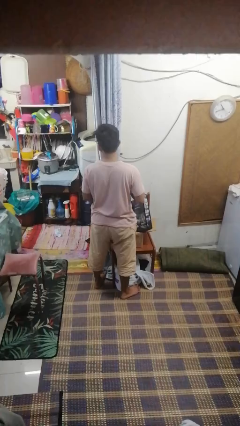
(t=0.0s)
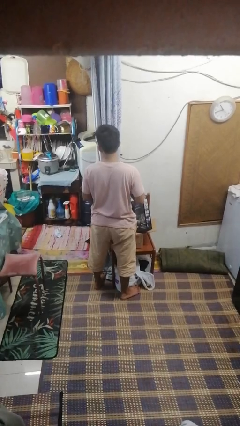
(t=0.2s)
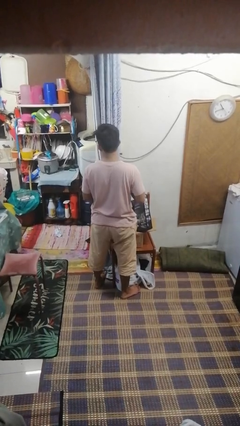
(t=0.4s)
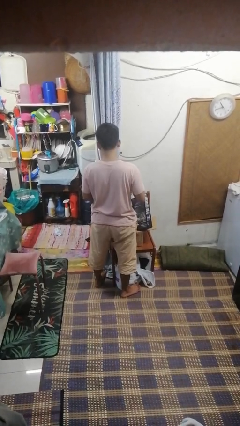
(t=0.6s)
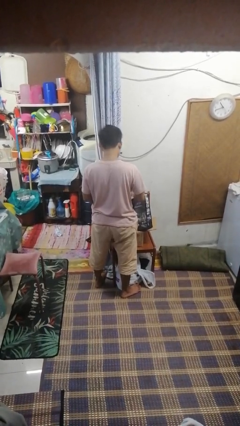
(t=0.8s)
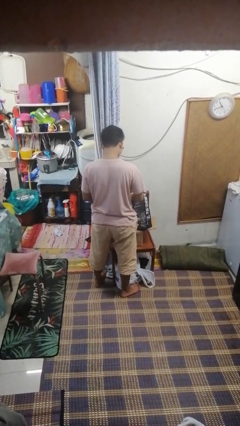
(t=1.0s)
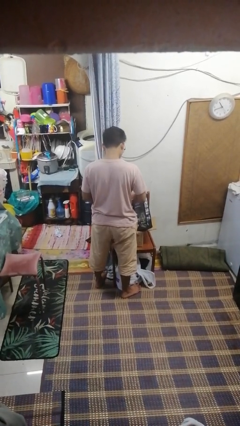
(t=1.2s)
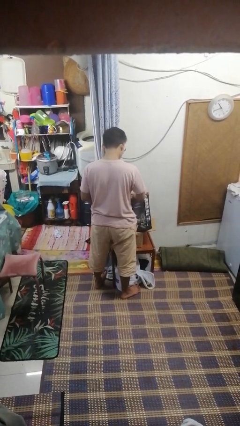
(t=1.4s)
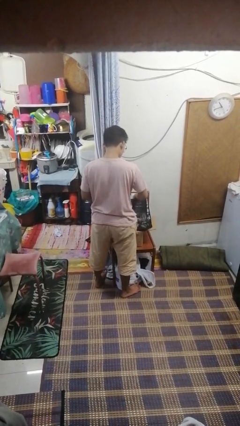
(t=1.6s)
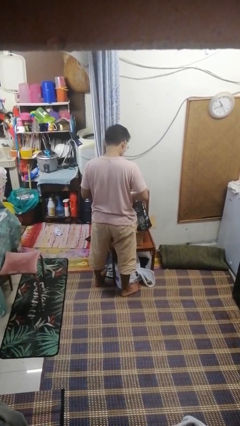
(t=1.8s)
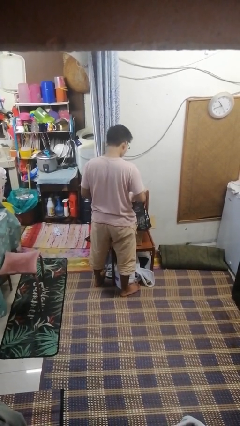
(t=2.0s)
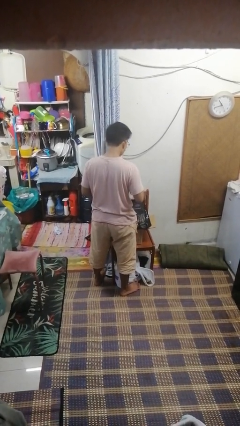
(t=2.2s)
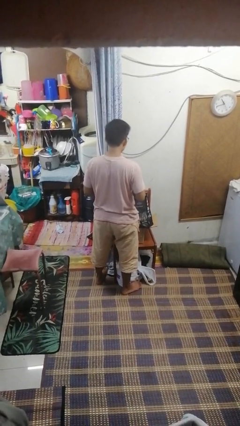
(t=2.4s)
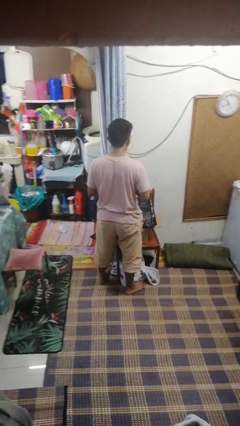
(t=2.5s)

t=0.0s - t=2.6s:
person searches in bag

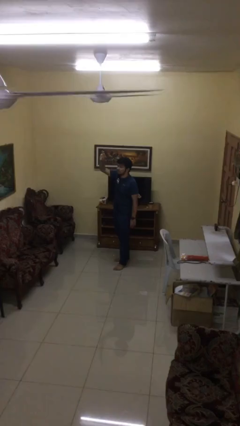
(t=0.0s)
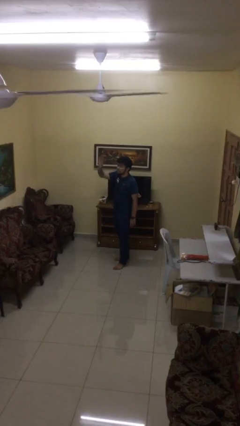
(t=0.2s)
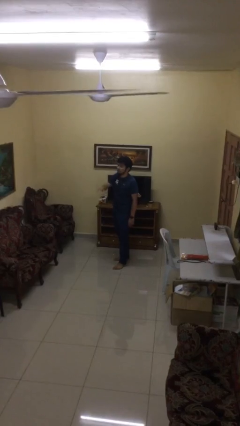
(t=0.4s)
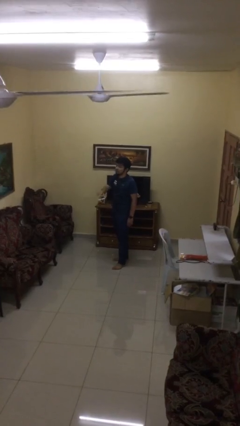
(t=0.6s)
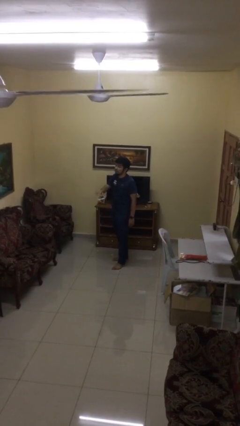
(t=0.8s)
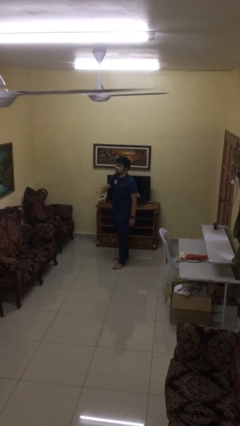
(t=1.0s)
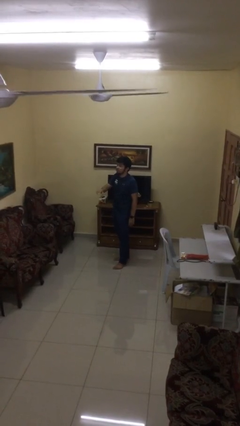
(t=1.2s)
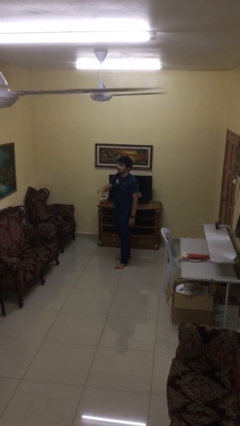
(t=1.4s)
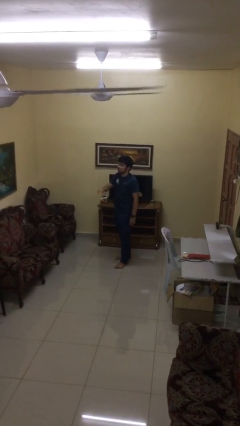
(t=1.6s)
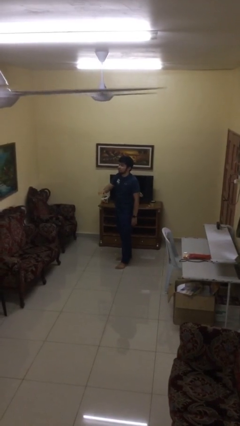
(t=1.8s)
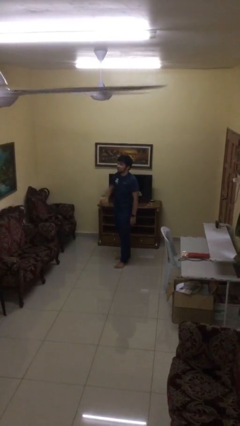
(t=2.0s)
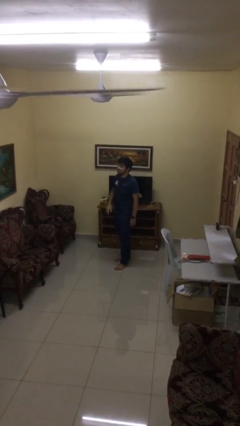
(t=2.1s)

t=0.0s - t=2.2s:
person gestures swipe down

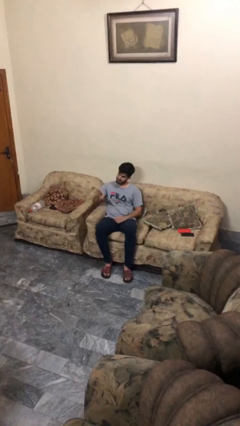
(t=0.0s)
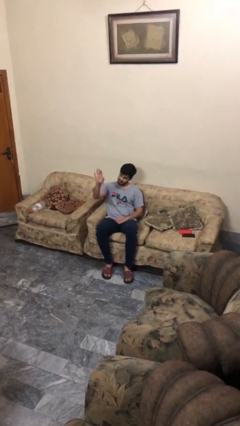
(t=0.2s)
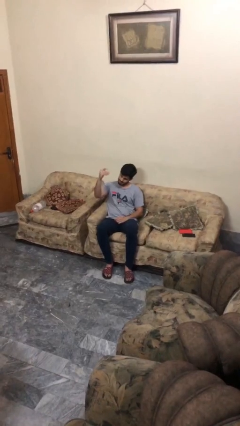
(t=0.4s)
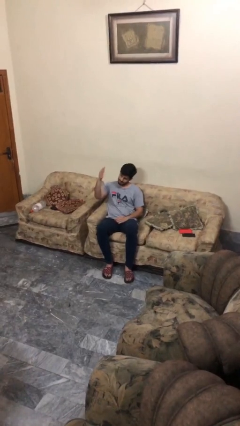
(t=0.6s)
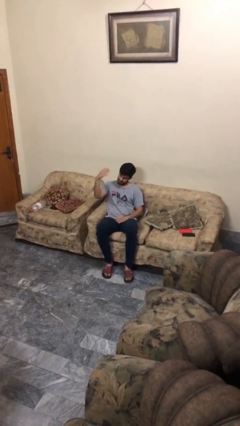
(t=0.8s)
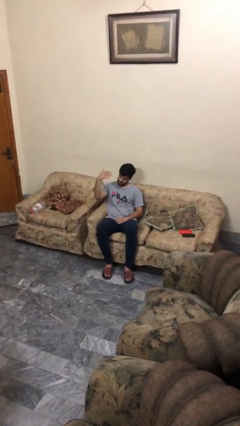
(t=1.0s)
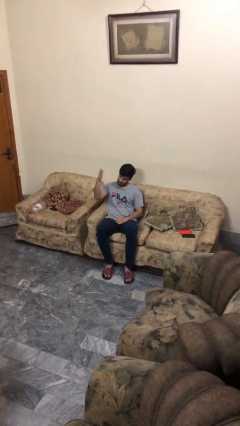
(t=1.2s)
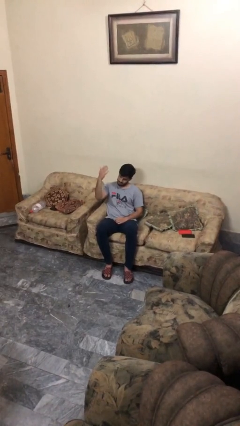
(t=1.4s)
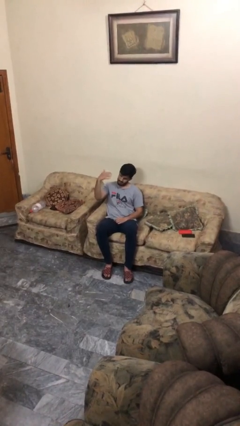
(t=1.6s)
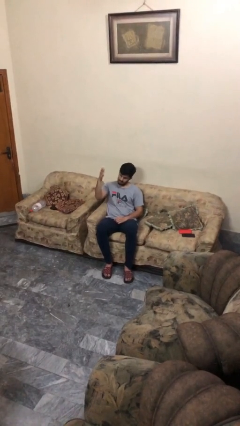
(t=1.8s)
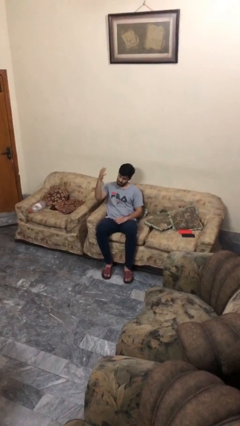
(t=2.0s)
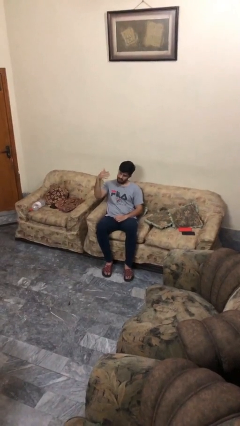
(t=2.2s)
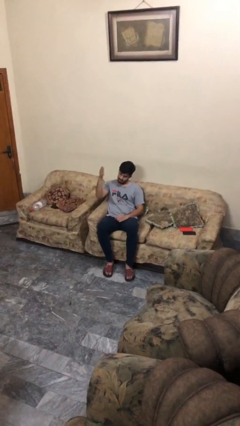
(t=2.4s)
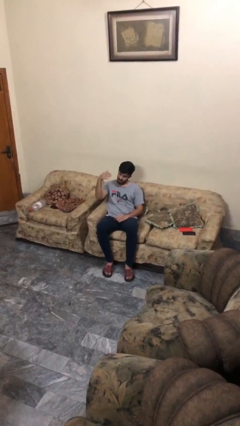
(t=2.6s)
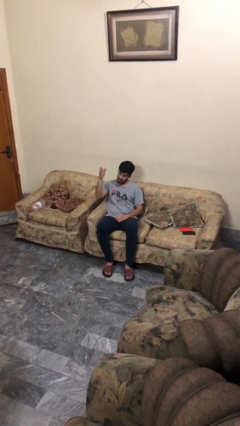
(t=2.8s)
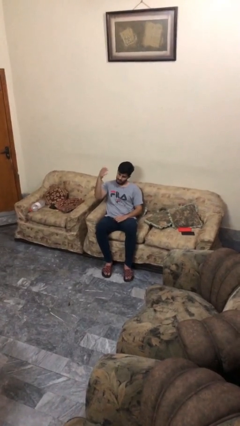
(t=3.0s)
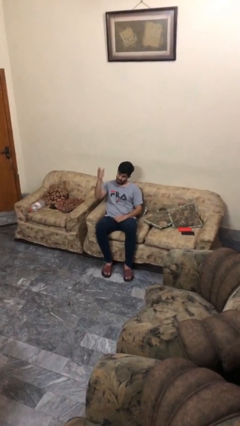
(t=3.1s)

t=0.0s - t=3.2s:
person gestures come here

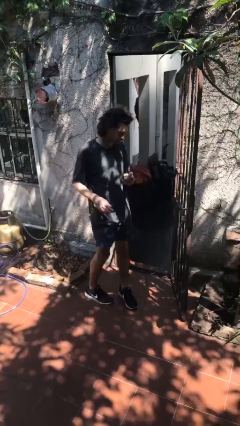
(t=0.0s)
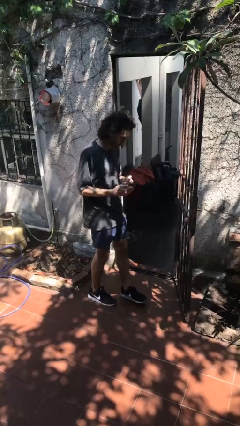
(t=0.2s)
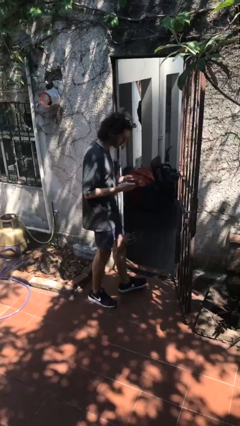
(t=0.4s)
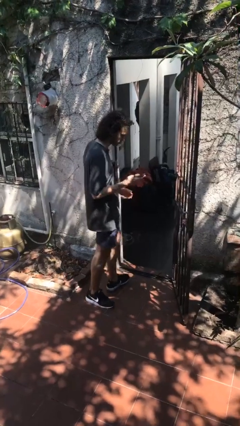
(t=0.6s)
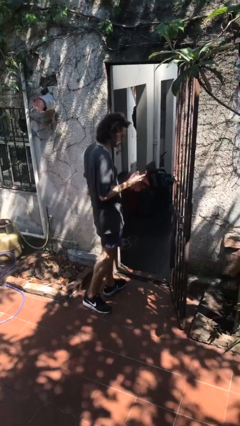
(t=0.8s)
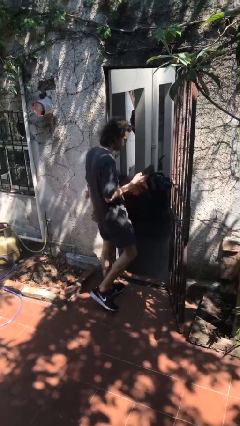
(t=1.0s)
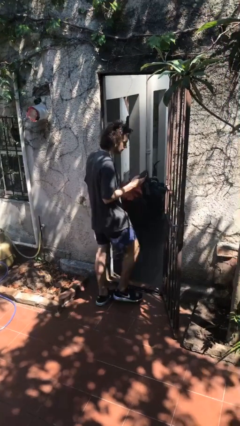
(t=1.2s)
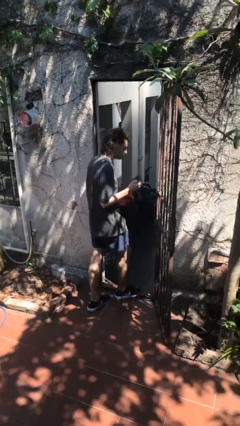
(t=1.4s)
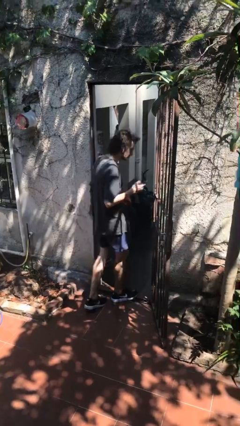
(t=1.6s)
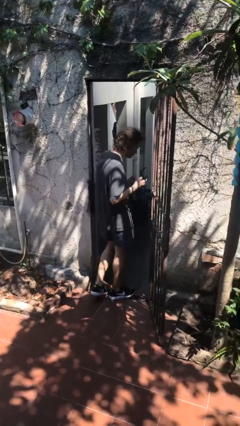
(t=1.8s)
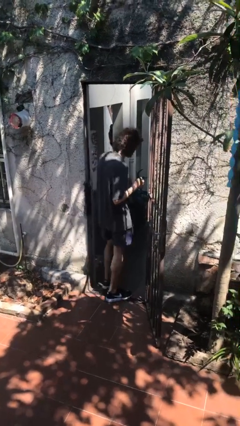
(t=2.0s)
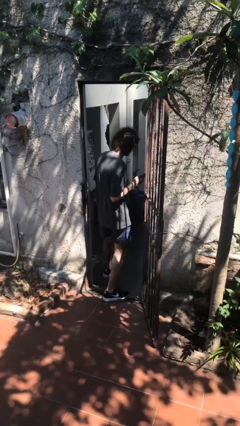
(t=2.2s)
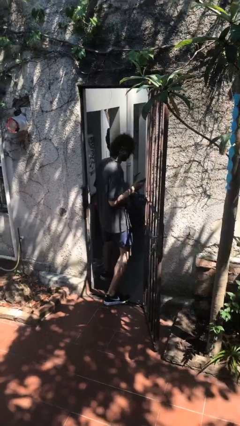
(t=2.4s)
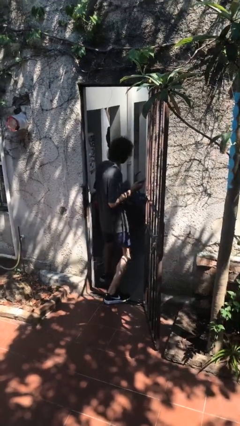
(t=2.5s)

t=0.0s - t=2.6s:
person exits scene through structure

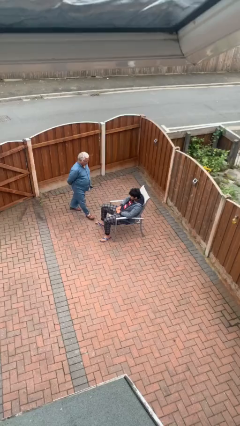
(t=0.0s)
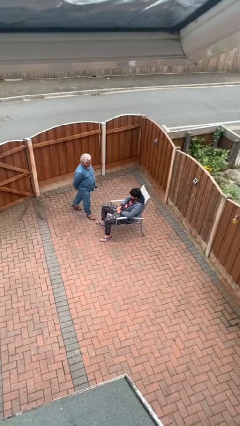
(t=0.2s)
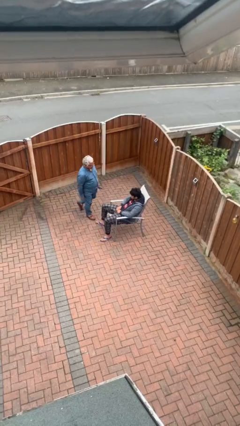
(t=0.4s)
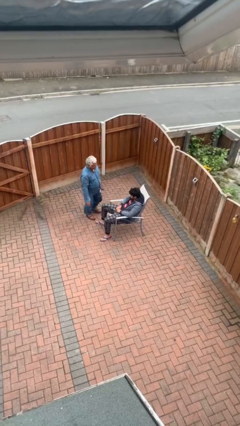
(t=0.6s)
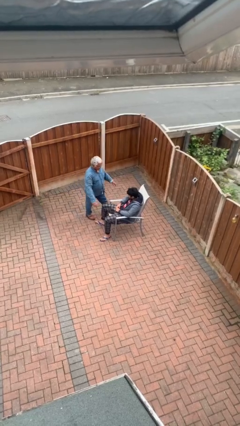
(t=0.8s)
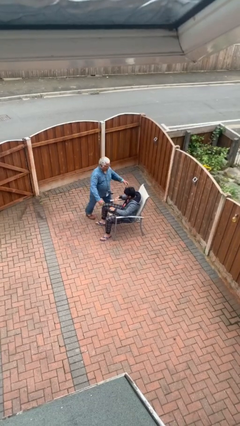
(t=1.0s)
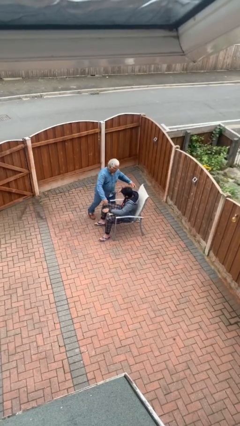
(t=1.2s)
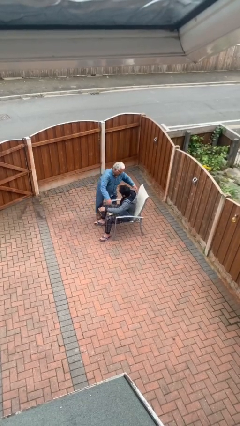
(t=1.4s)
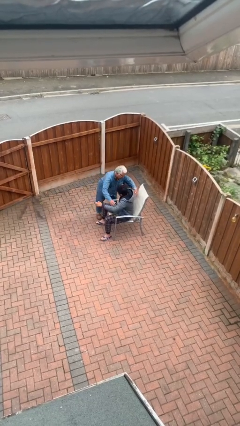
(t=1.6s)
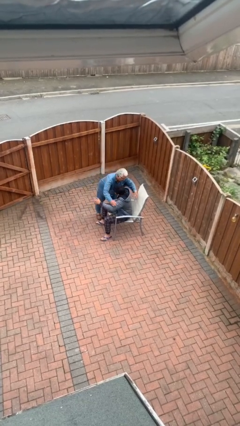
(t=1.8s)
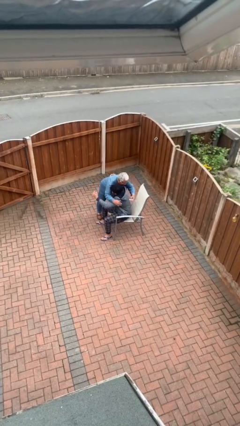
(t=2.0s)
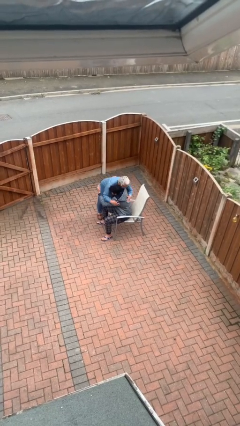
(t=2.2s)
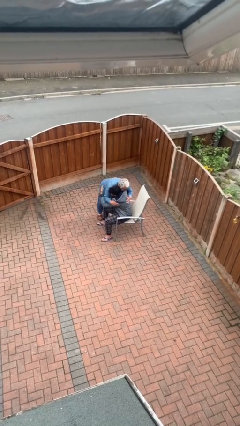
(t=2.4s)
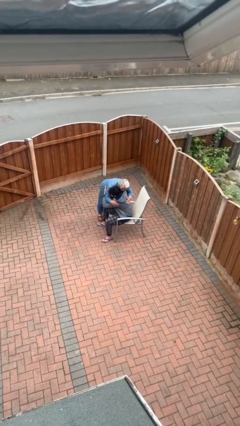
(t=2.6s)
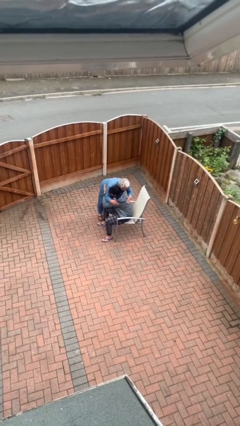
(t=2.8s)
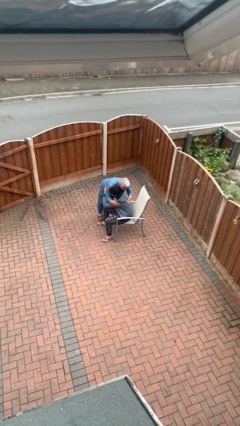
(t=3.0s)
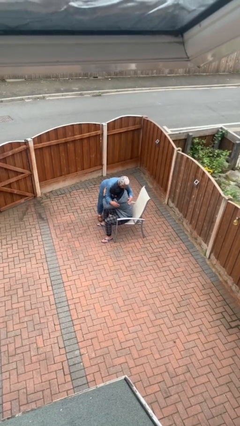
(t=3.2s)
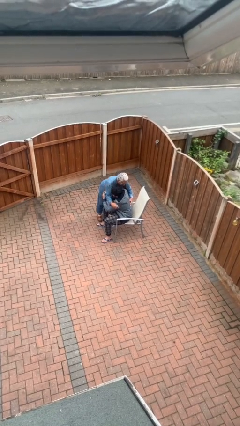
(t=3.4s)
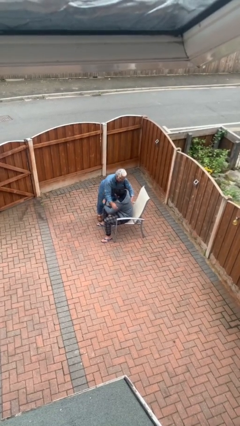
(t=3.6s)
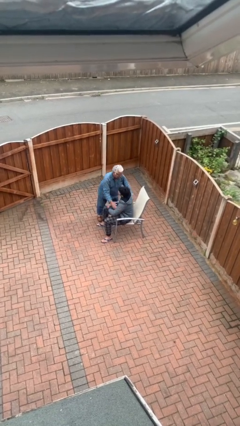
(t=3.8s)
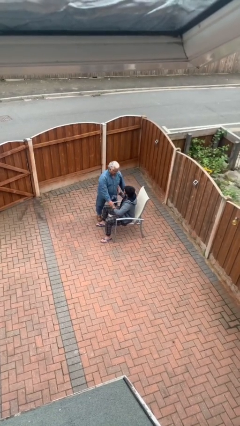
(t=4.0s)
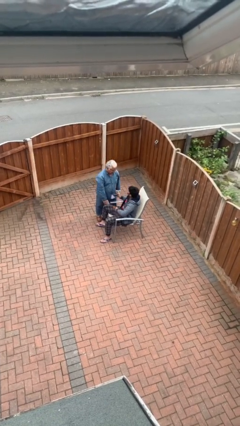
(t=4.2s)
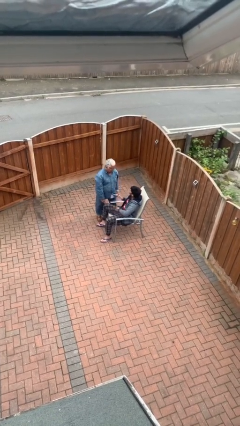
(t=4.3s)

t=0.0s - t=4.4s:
person embraces person

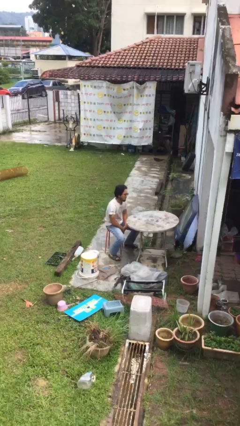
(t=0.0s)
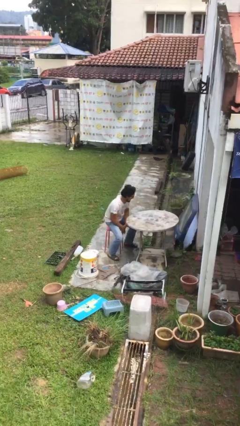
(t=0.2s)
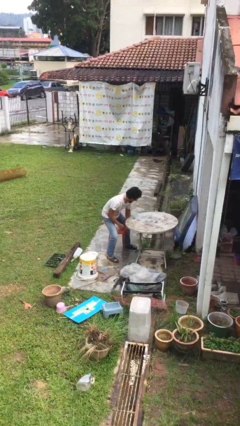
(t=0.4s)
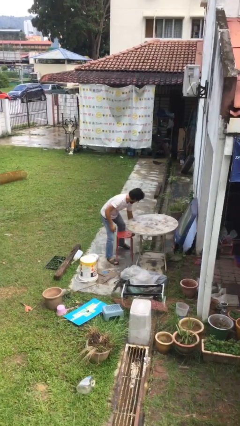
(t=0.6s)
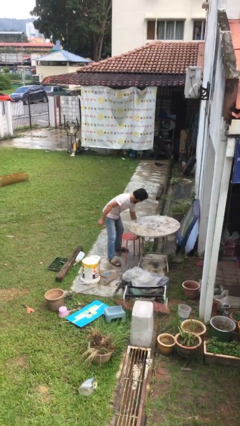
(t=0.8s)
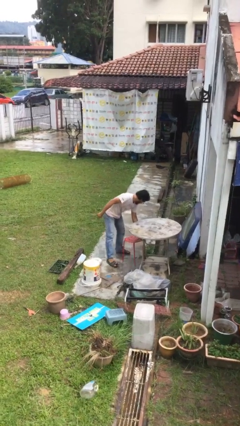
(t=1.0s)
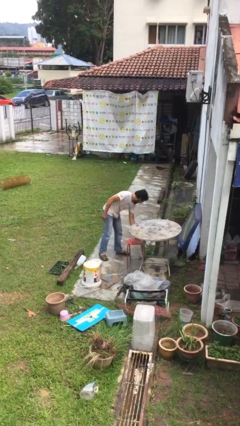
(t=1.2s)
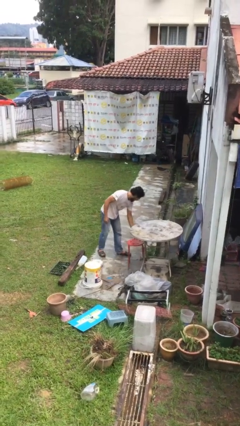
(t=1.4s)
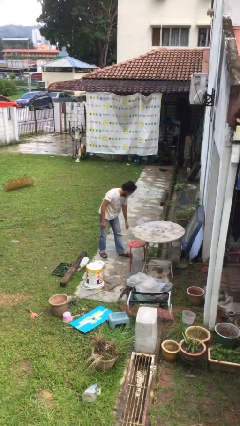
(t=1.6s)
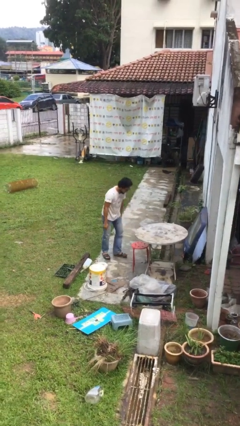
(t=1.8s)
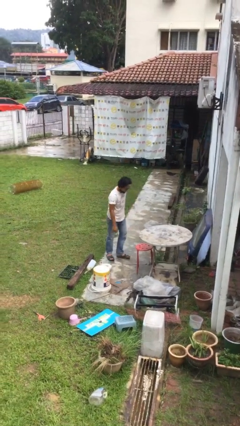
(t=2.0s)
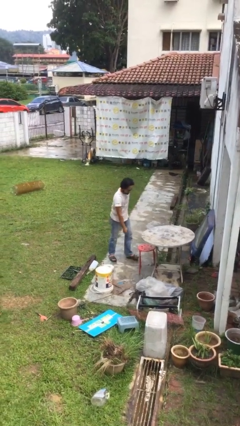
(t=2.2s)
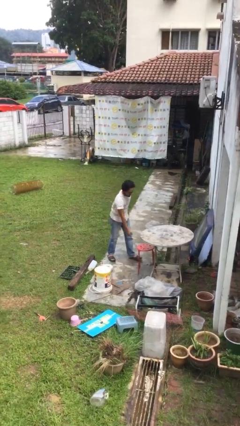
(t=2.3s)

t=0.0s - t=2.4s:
person stands up
